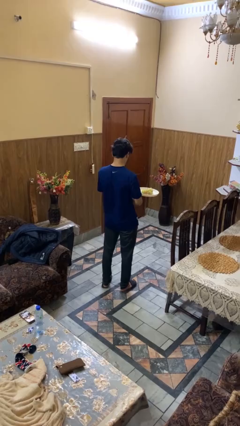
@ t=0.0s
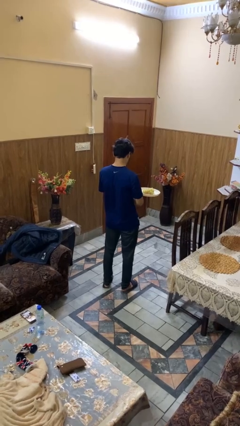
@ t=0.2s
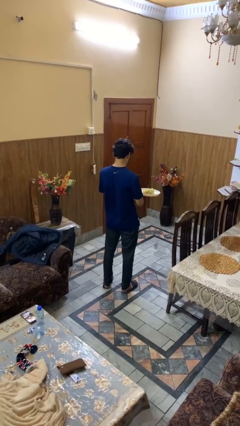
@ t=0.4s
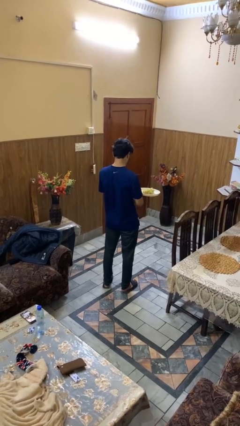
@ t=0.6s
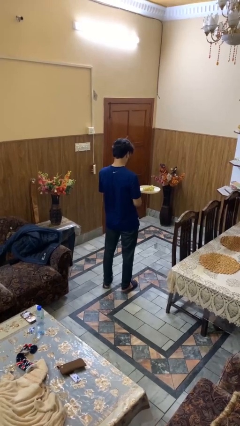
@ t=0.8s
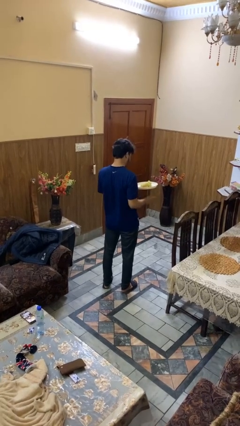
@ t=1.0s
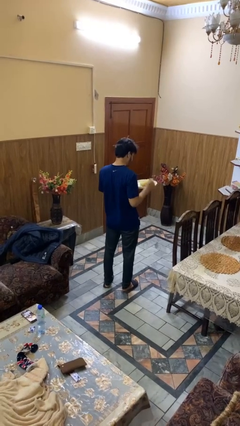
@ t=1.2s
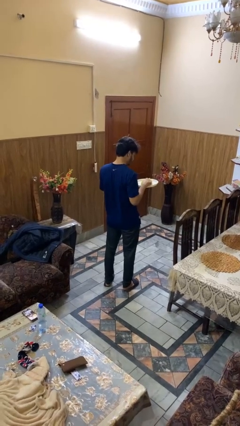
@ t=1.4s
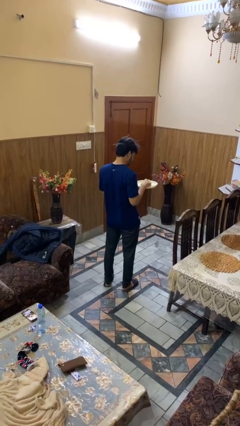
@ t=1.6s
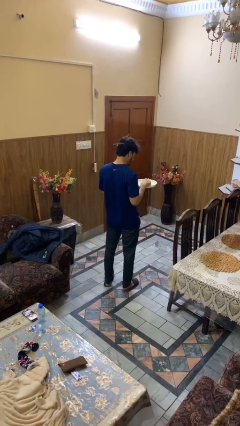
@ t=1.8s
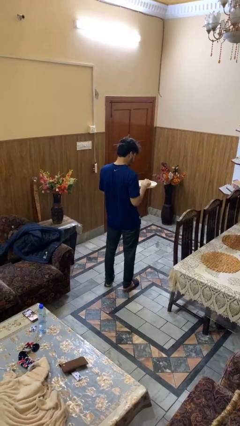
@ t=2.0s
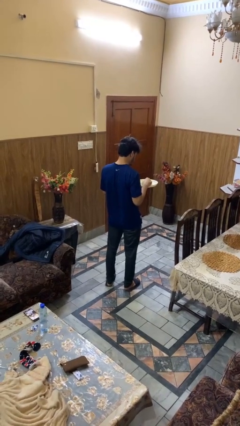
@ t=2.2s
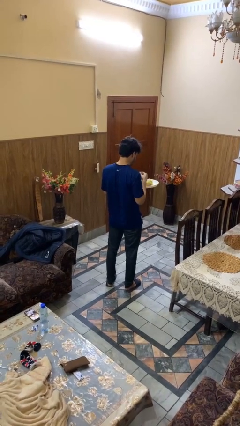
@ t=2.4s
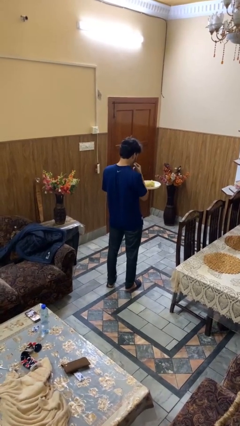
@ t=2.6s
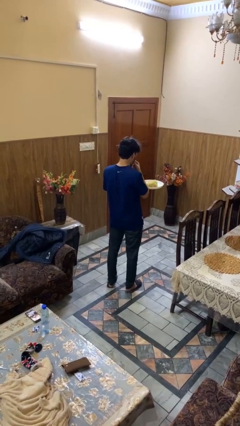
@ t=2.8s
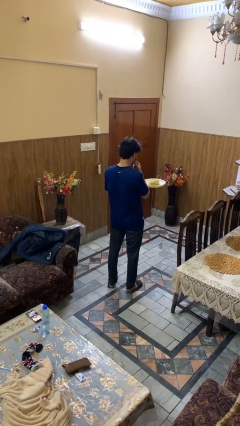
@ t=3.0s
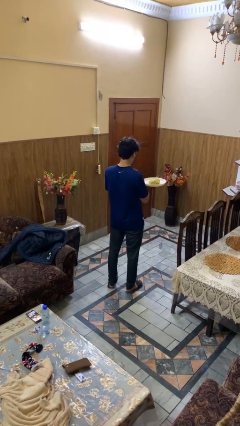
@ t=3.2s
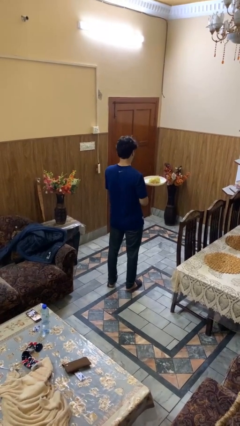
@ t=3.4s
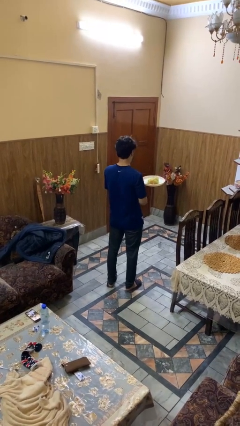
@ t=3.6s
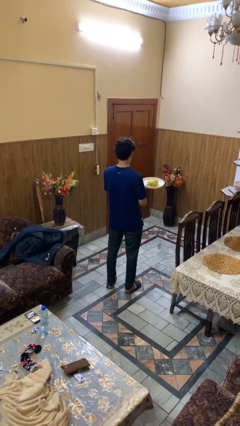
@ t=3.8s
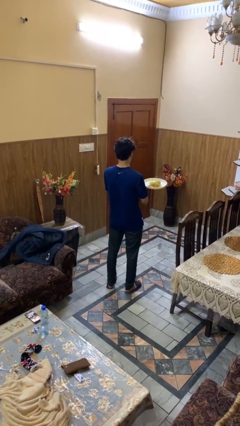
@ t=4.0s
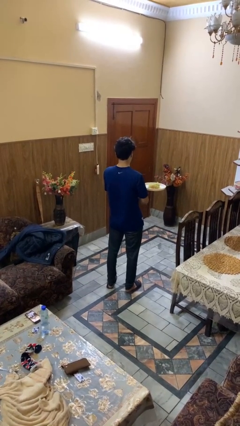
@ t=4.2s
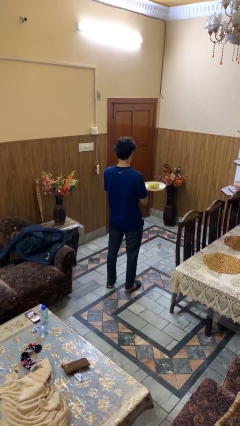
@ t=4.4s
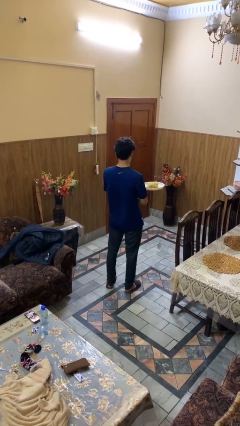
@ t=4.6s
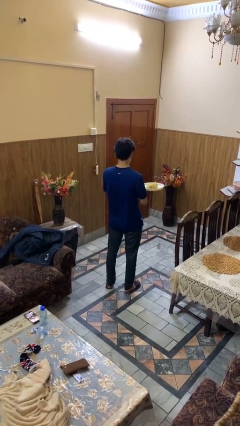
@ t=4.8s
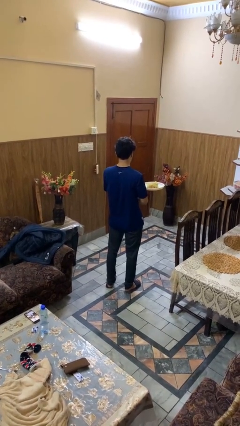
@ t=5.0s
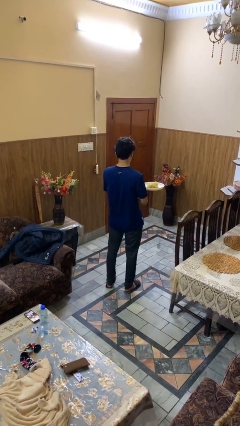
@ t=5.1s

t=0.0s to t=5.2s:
person eats with hands

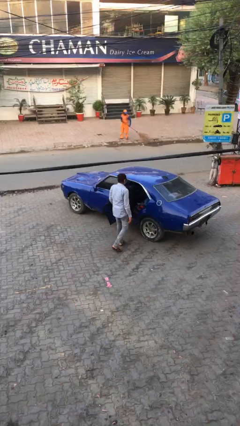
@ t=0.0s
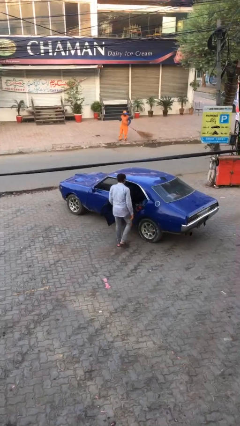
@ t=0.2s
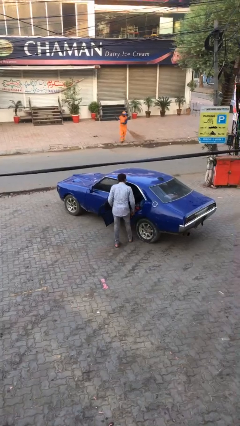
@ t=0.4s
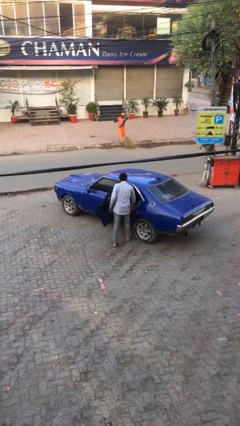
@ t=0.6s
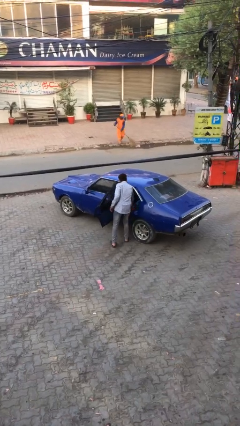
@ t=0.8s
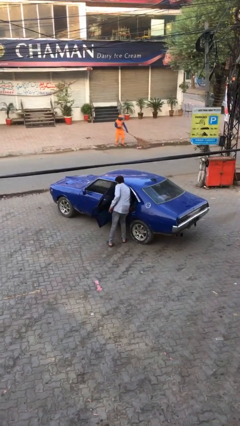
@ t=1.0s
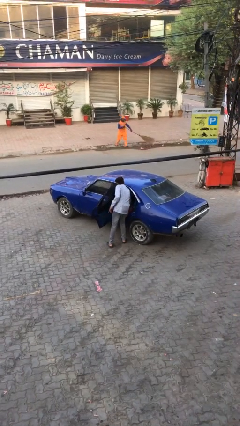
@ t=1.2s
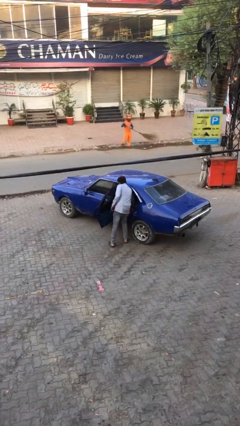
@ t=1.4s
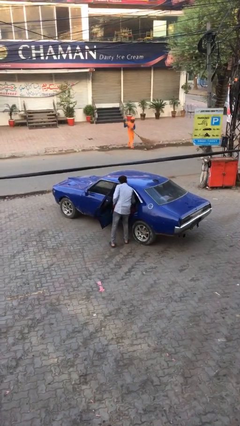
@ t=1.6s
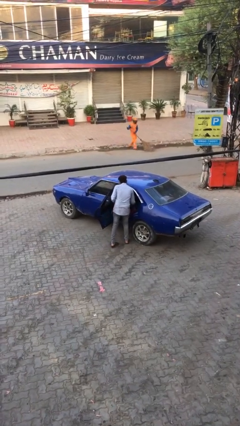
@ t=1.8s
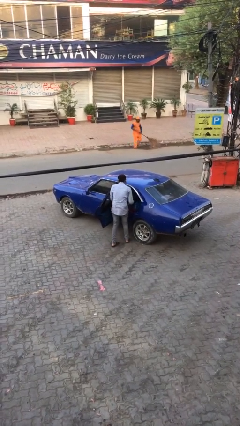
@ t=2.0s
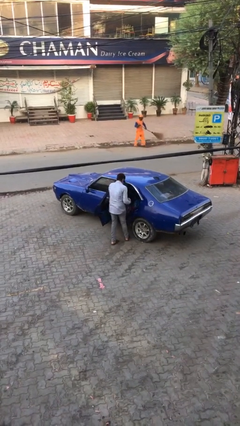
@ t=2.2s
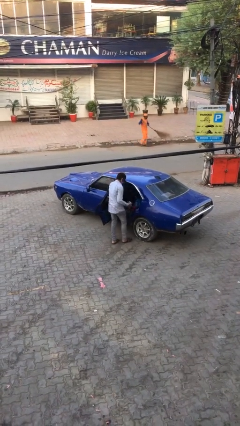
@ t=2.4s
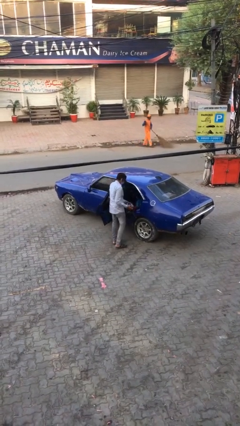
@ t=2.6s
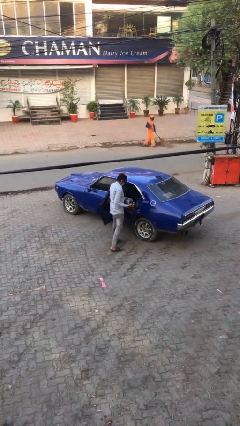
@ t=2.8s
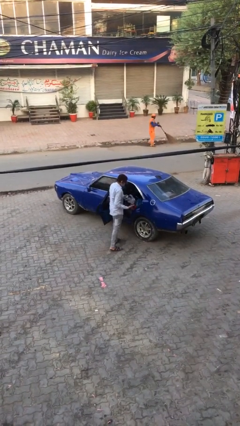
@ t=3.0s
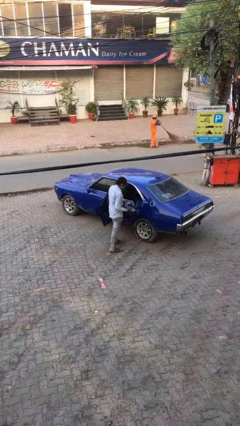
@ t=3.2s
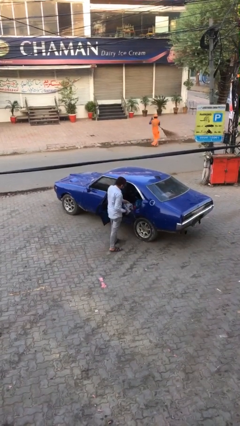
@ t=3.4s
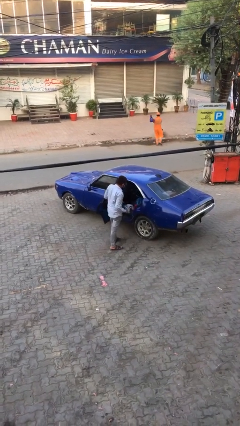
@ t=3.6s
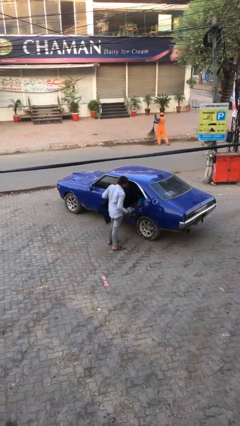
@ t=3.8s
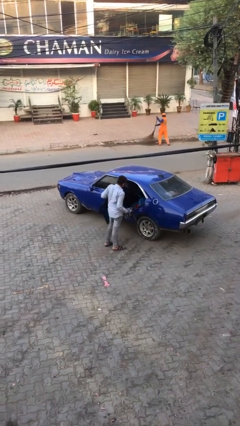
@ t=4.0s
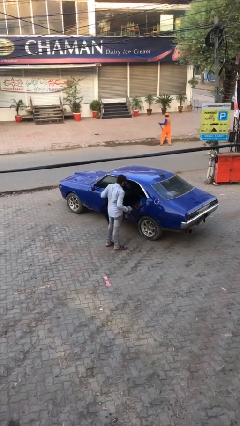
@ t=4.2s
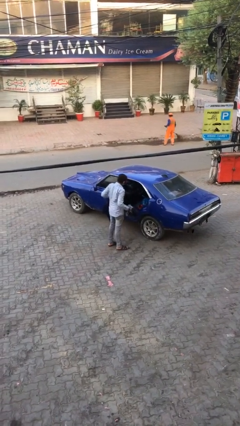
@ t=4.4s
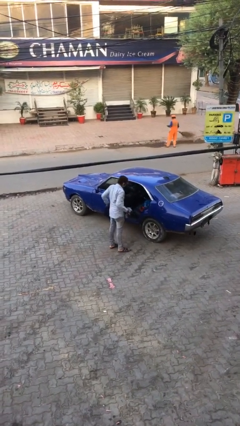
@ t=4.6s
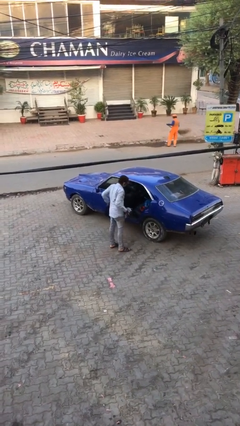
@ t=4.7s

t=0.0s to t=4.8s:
person unloads car

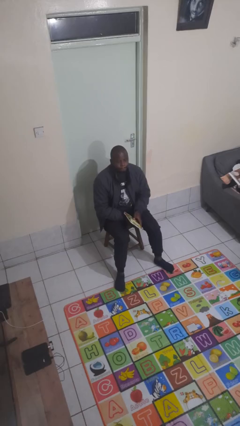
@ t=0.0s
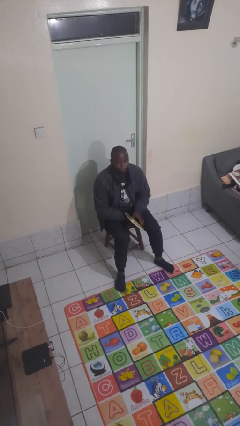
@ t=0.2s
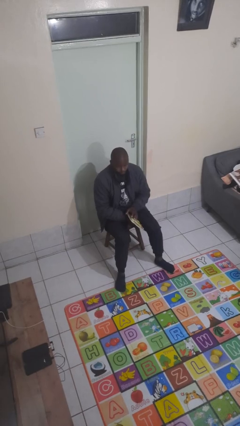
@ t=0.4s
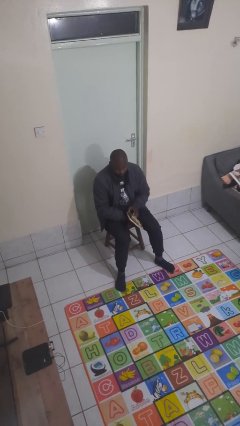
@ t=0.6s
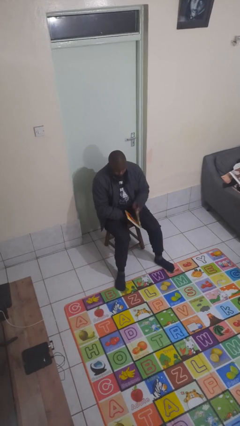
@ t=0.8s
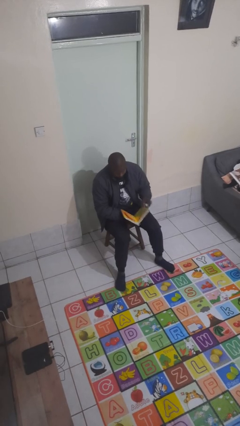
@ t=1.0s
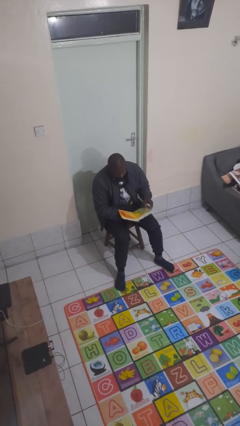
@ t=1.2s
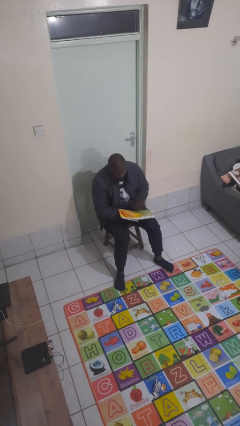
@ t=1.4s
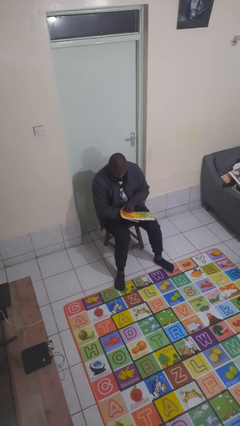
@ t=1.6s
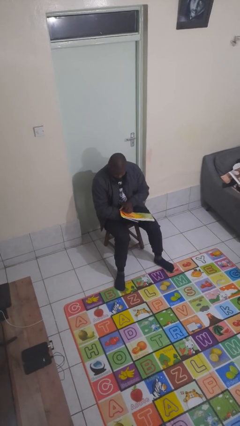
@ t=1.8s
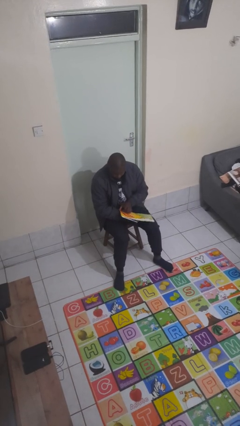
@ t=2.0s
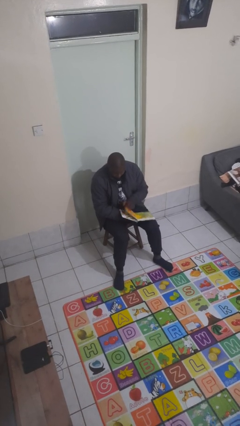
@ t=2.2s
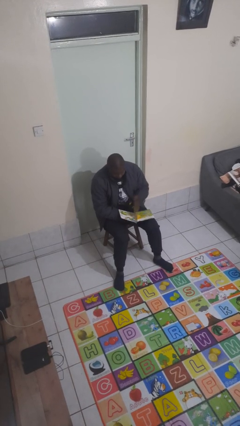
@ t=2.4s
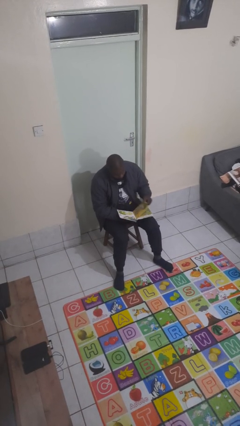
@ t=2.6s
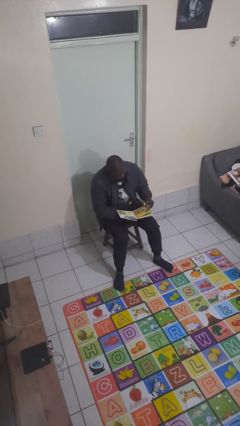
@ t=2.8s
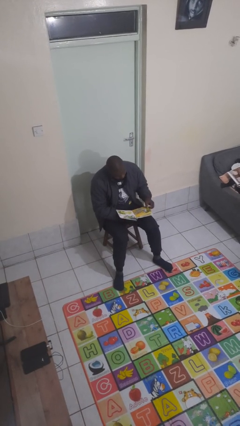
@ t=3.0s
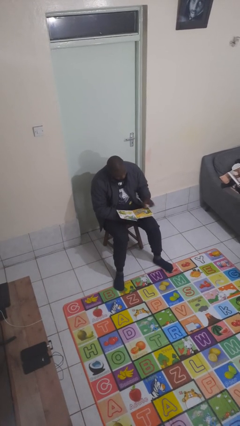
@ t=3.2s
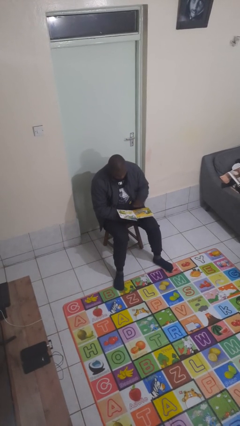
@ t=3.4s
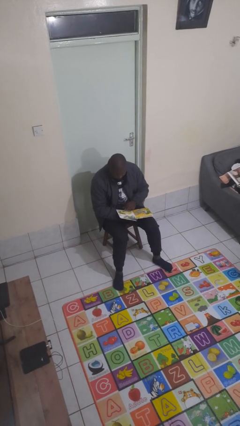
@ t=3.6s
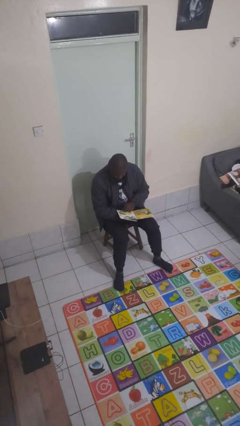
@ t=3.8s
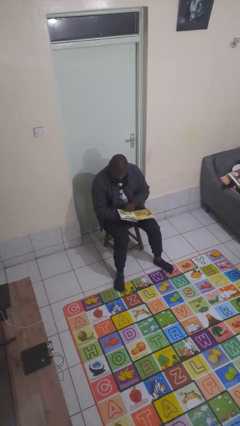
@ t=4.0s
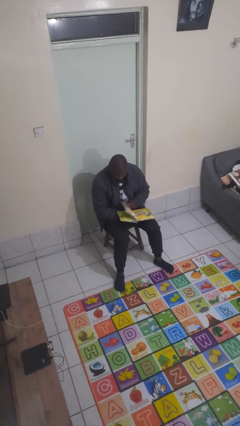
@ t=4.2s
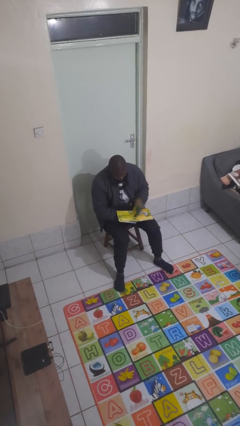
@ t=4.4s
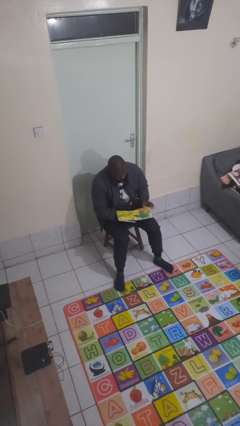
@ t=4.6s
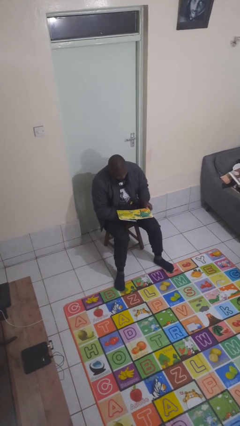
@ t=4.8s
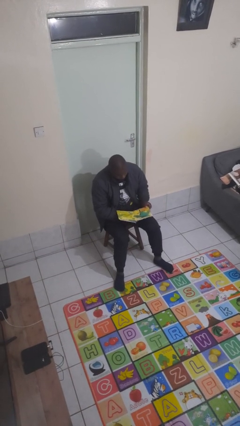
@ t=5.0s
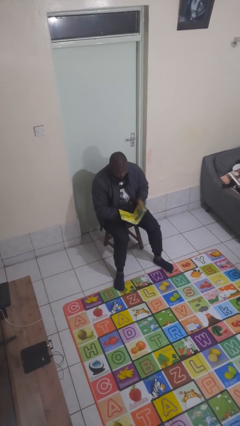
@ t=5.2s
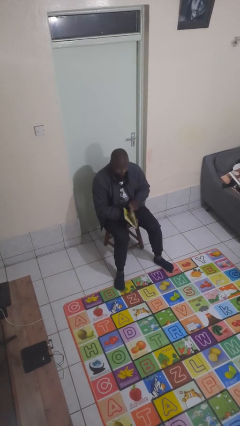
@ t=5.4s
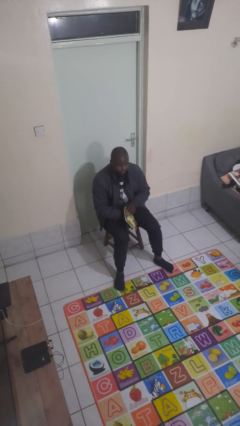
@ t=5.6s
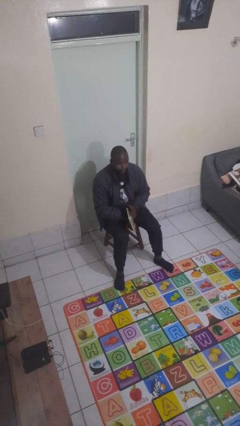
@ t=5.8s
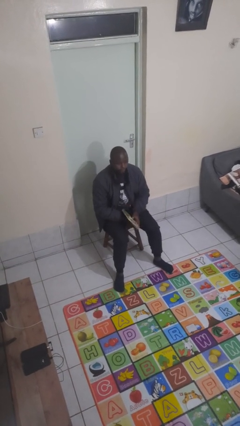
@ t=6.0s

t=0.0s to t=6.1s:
person reads book

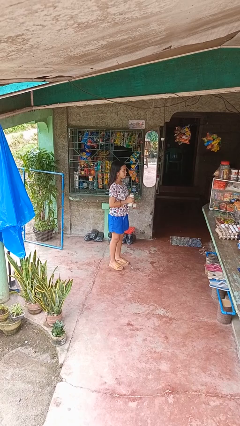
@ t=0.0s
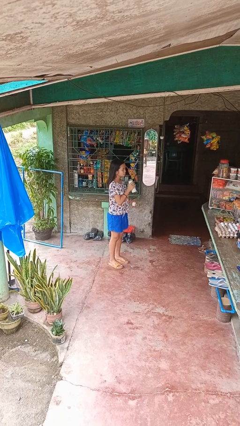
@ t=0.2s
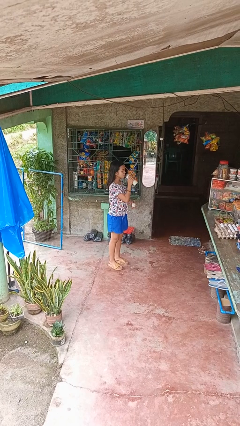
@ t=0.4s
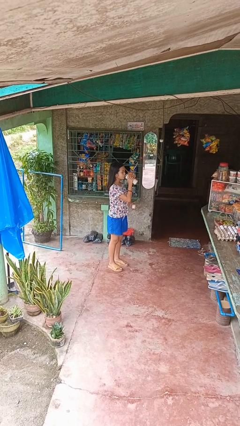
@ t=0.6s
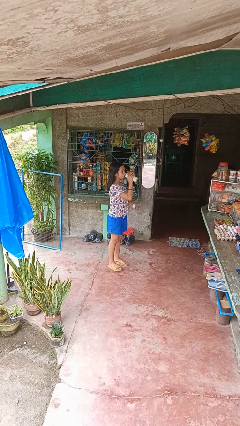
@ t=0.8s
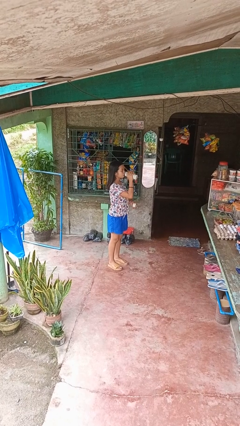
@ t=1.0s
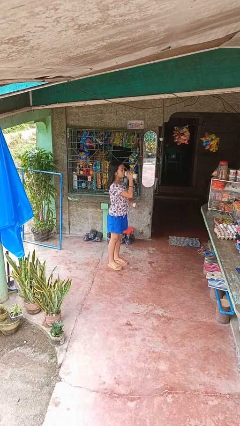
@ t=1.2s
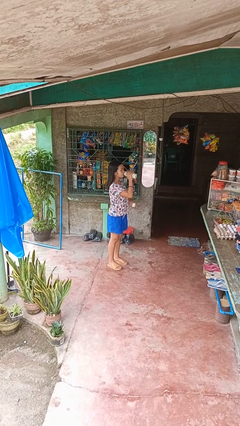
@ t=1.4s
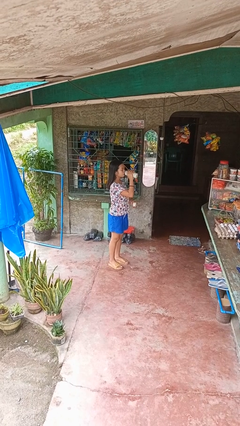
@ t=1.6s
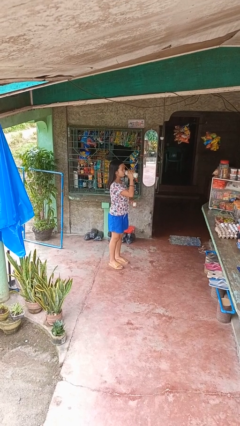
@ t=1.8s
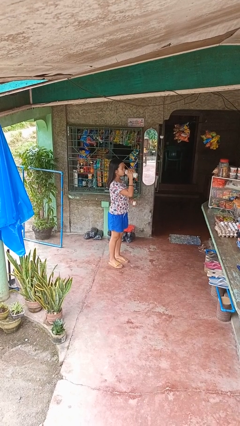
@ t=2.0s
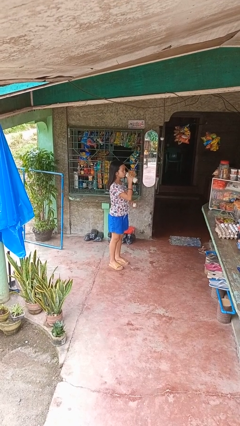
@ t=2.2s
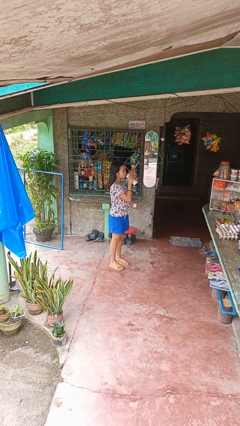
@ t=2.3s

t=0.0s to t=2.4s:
person drinks from bottle
